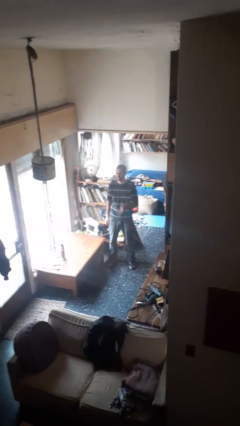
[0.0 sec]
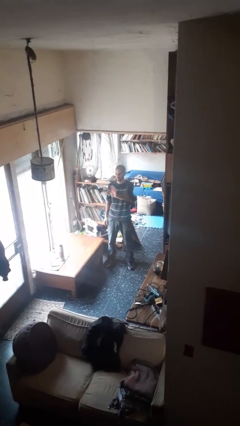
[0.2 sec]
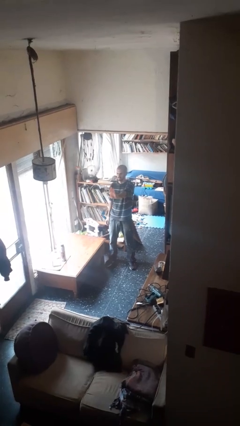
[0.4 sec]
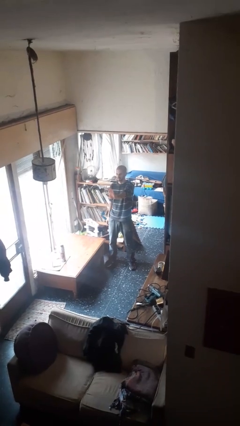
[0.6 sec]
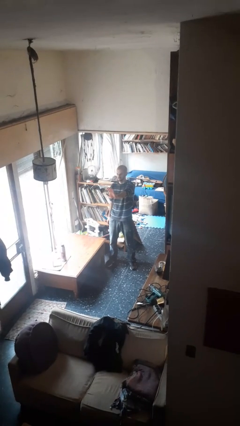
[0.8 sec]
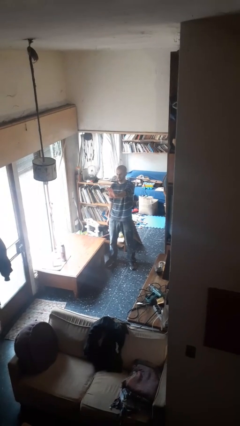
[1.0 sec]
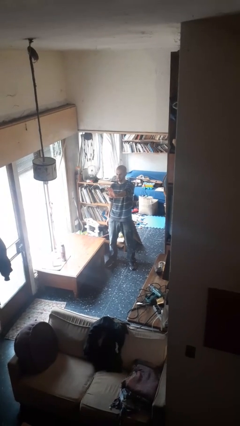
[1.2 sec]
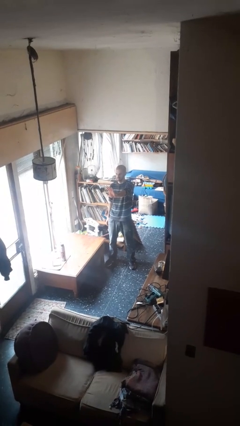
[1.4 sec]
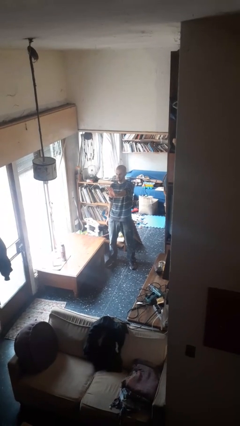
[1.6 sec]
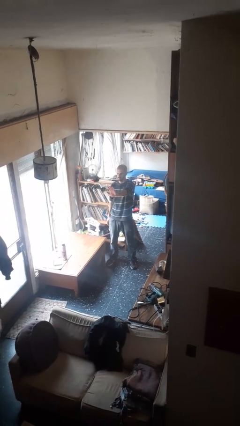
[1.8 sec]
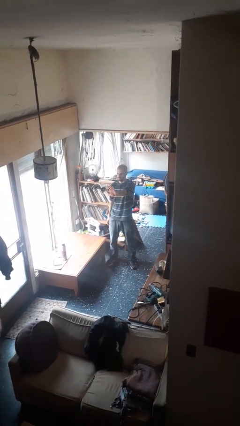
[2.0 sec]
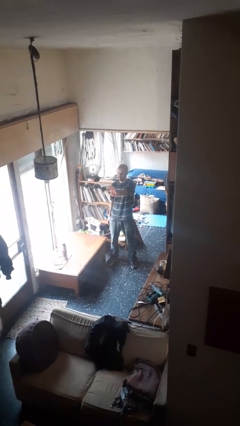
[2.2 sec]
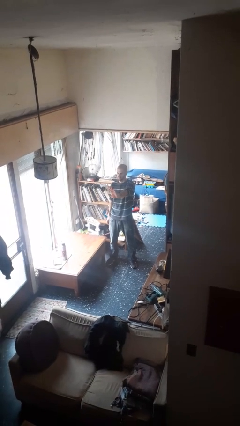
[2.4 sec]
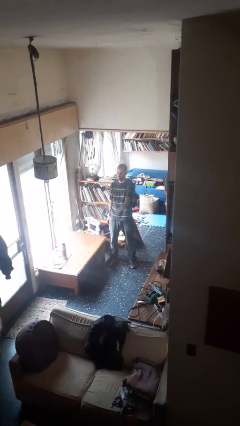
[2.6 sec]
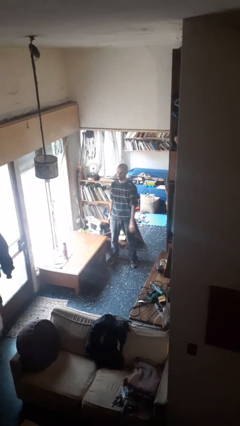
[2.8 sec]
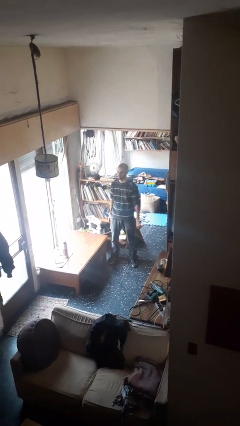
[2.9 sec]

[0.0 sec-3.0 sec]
person gestures stop

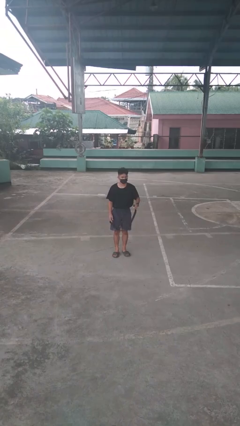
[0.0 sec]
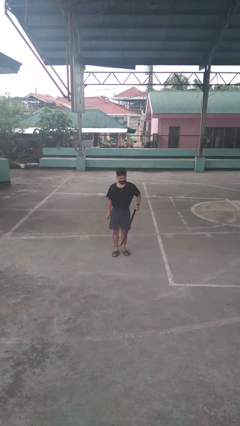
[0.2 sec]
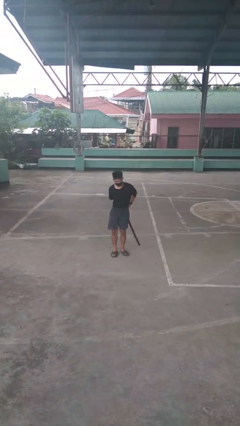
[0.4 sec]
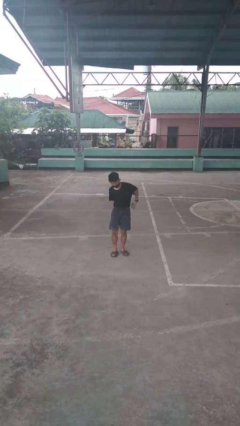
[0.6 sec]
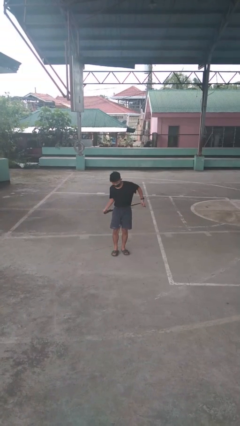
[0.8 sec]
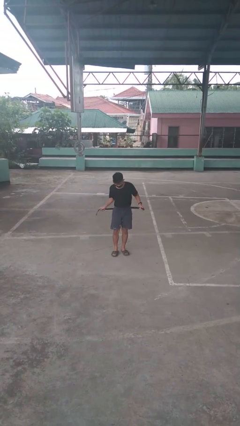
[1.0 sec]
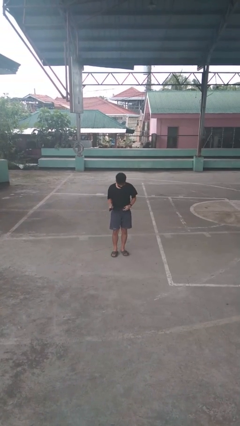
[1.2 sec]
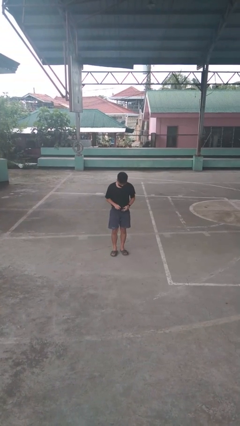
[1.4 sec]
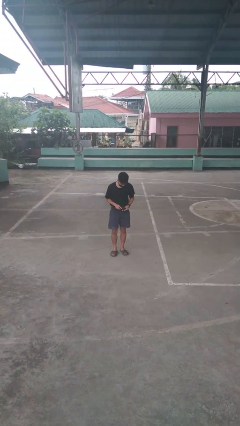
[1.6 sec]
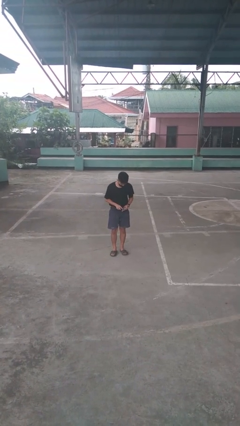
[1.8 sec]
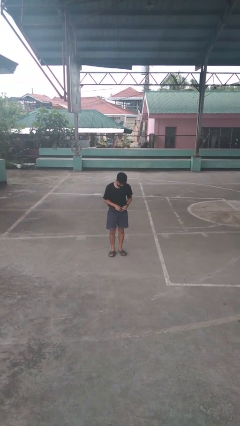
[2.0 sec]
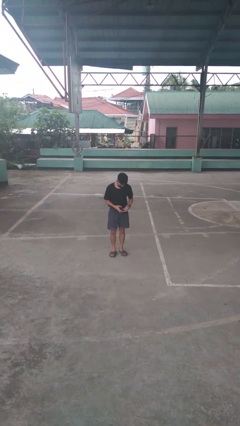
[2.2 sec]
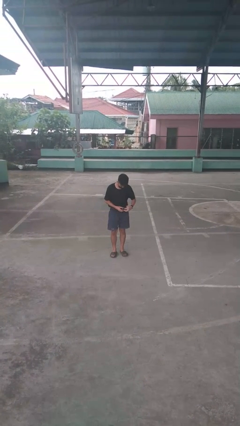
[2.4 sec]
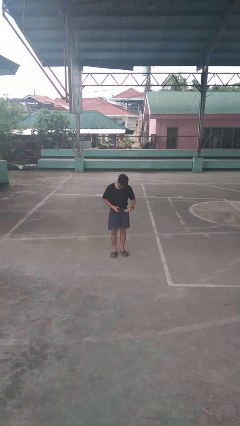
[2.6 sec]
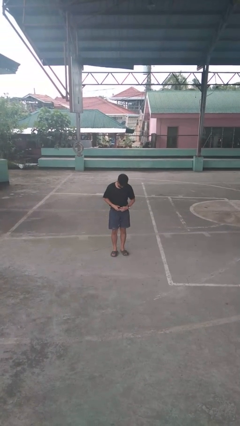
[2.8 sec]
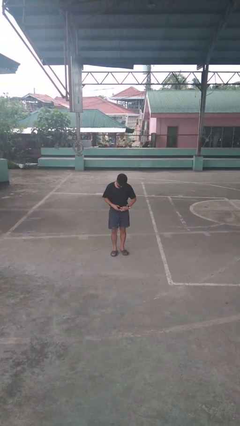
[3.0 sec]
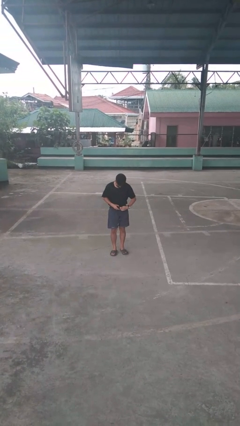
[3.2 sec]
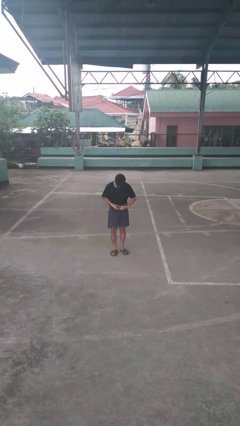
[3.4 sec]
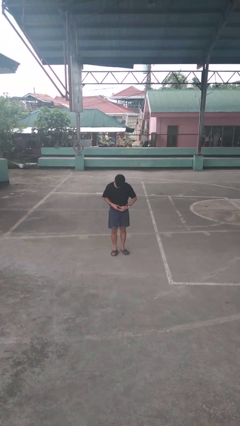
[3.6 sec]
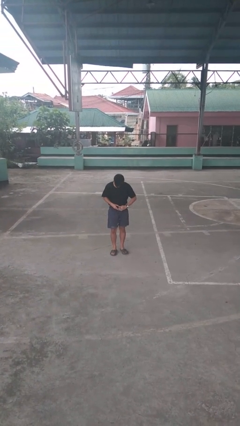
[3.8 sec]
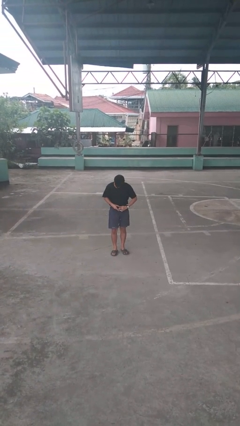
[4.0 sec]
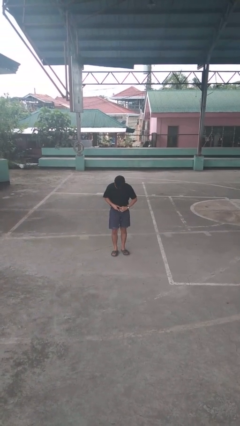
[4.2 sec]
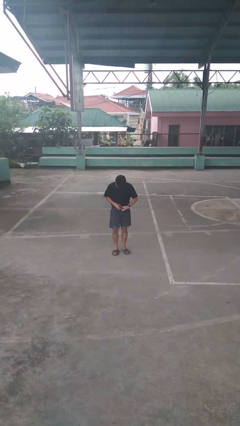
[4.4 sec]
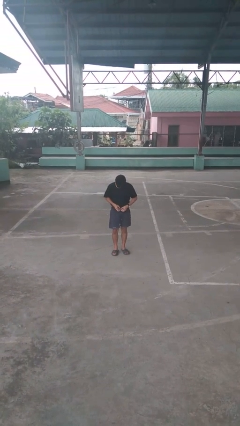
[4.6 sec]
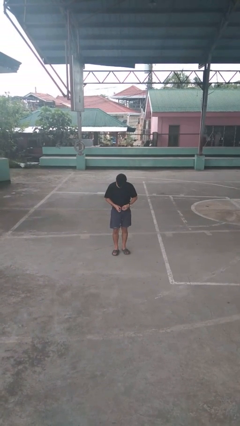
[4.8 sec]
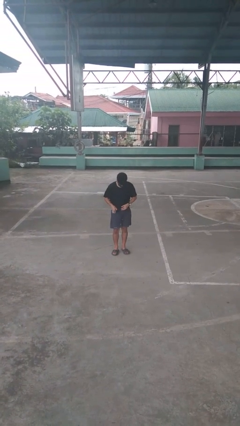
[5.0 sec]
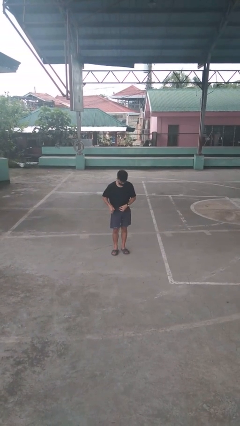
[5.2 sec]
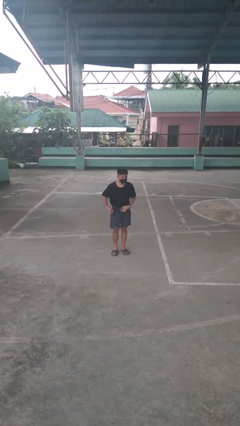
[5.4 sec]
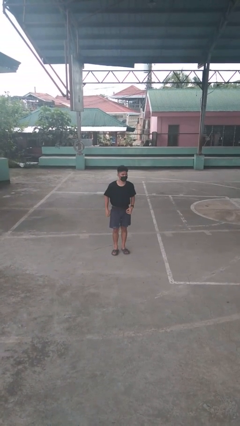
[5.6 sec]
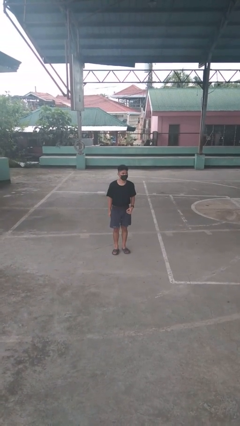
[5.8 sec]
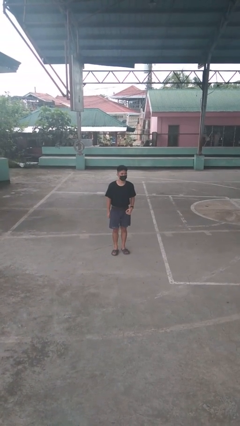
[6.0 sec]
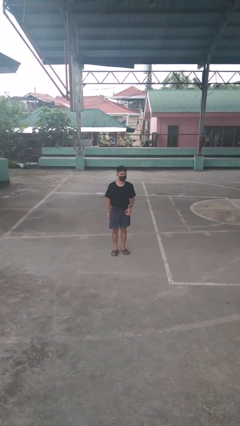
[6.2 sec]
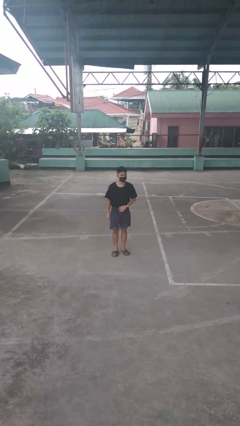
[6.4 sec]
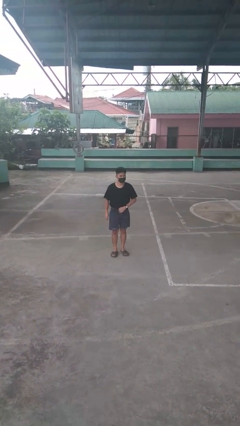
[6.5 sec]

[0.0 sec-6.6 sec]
person puts on belt

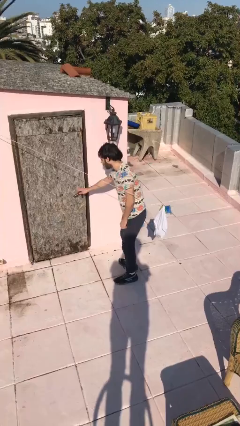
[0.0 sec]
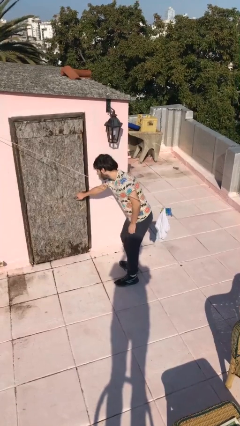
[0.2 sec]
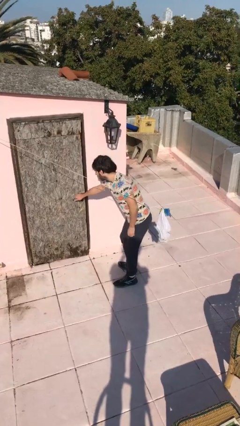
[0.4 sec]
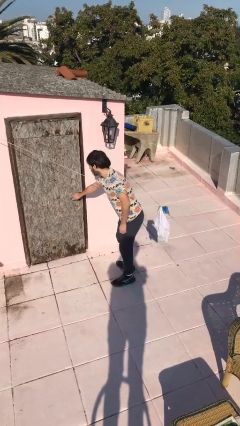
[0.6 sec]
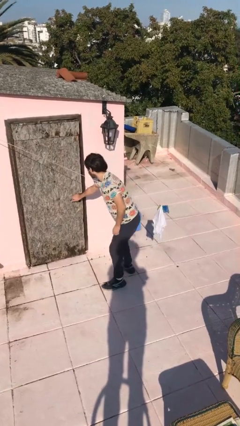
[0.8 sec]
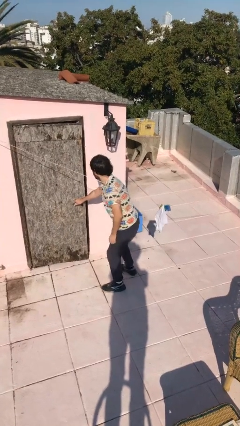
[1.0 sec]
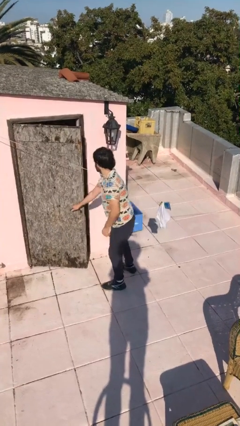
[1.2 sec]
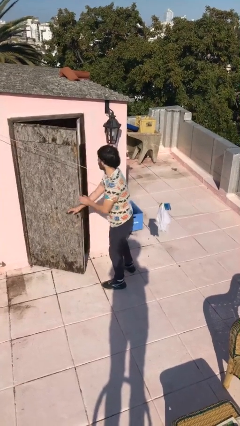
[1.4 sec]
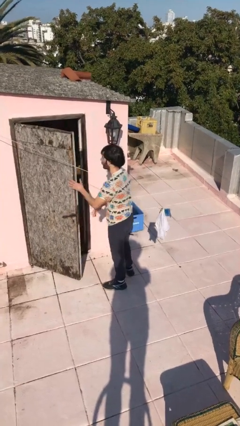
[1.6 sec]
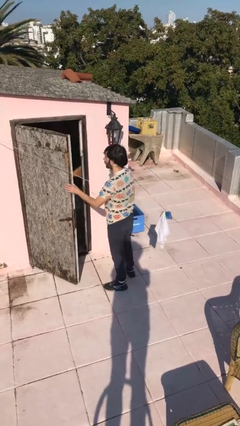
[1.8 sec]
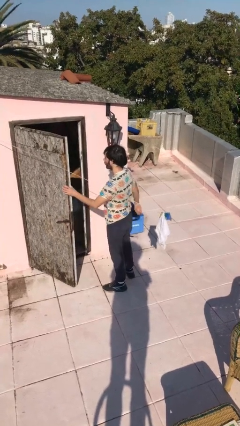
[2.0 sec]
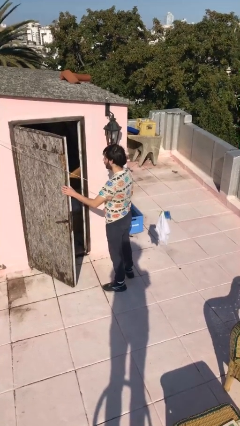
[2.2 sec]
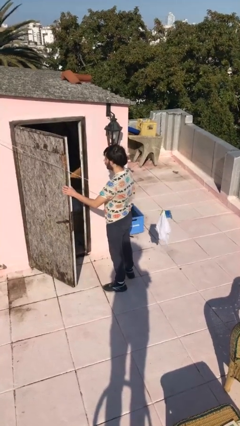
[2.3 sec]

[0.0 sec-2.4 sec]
person opens facility door

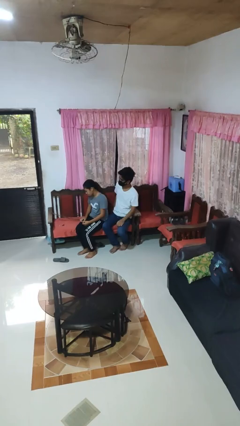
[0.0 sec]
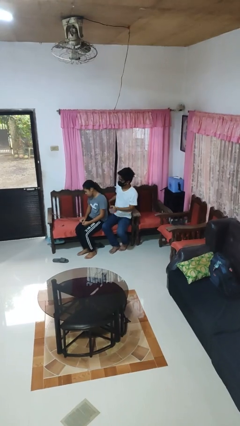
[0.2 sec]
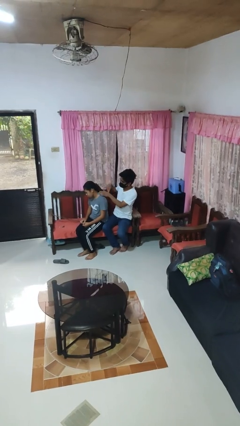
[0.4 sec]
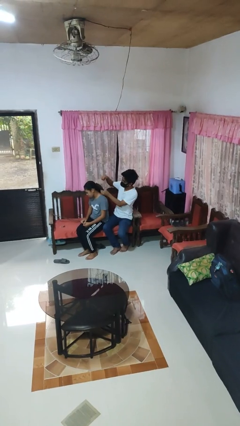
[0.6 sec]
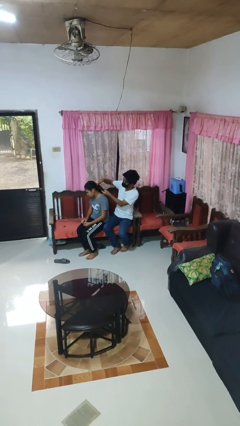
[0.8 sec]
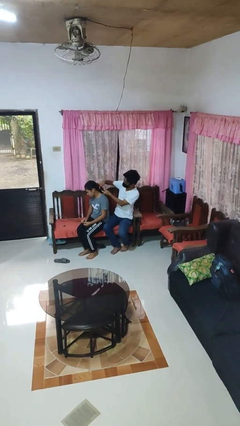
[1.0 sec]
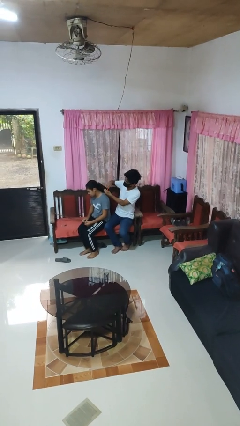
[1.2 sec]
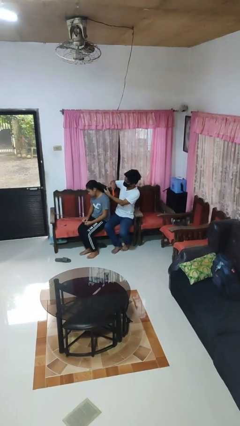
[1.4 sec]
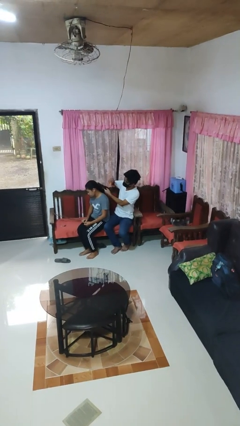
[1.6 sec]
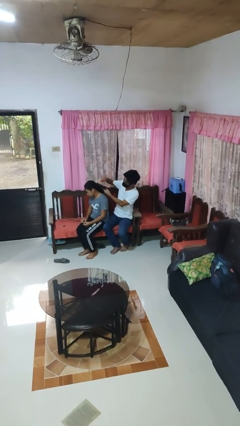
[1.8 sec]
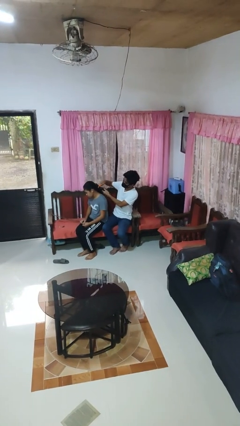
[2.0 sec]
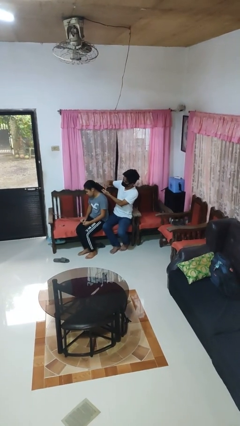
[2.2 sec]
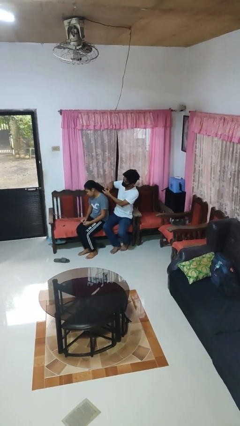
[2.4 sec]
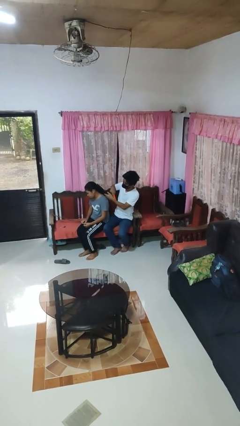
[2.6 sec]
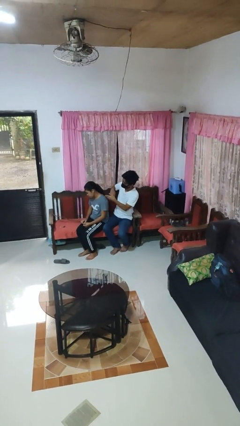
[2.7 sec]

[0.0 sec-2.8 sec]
person brushes hair of person

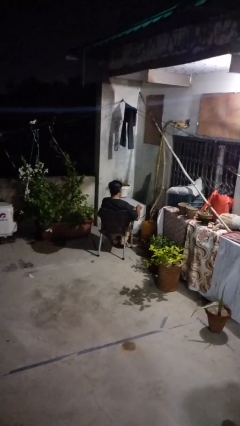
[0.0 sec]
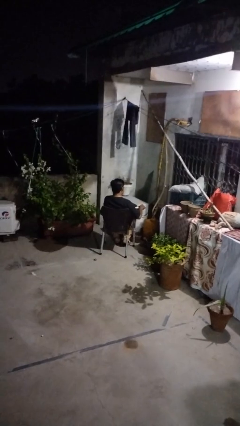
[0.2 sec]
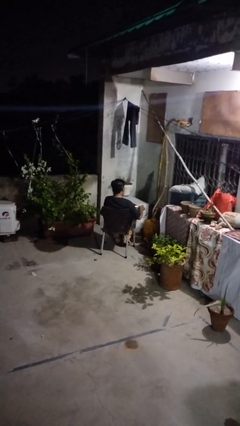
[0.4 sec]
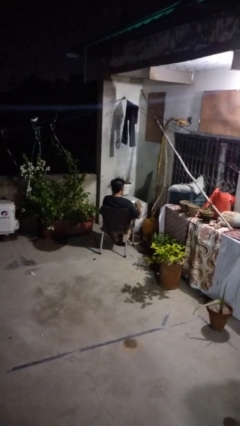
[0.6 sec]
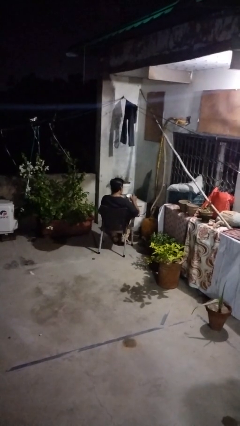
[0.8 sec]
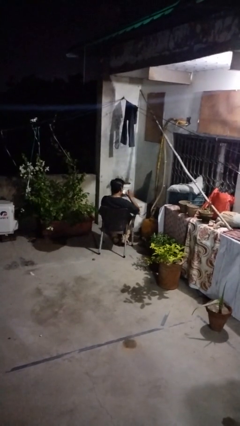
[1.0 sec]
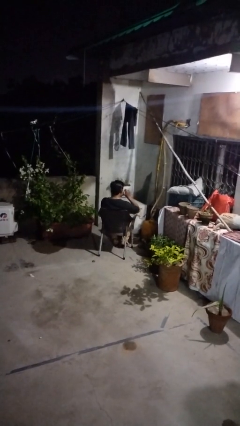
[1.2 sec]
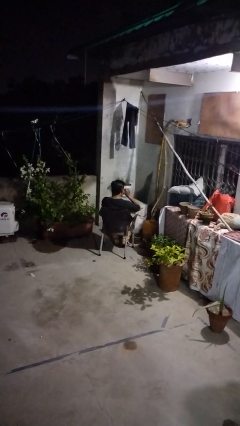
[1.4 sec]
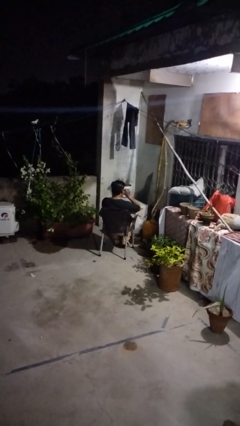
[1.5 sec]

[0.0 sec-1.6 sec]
person drinks from mug

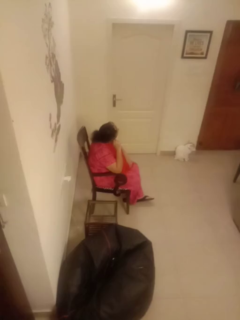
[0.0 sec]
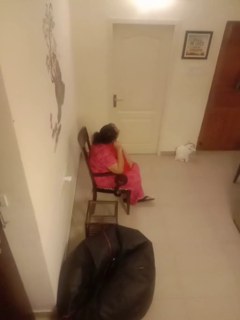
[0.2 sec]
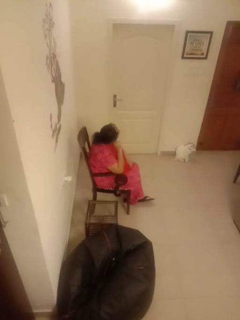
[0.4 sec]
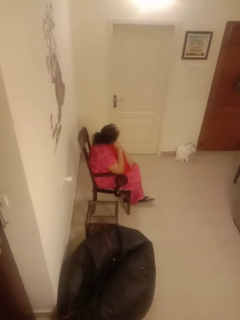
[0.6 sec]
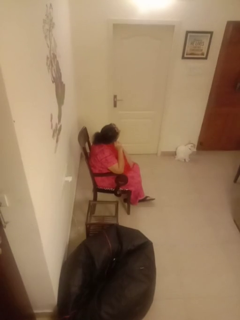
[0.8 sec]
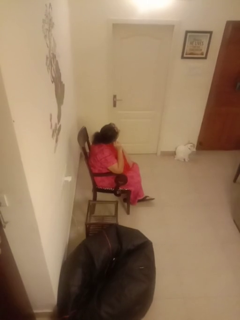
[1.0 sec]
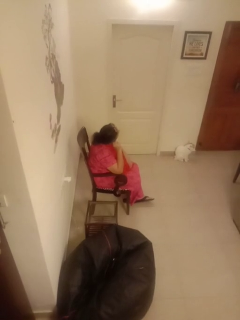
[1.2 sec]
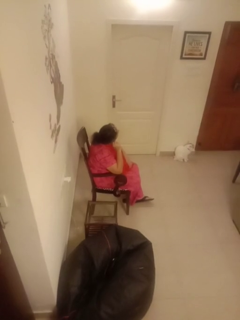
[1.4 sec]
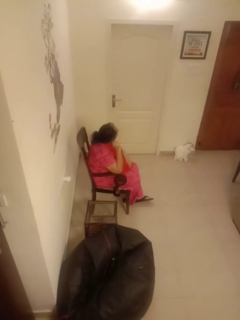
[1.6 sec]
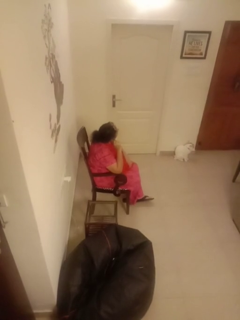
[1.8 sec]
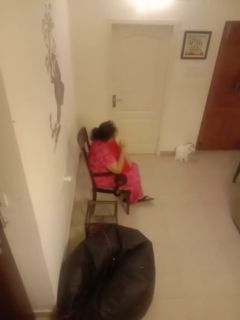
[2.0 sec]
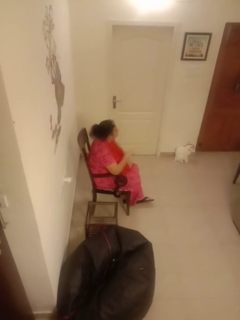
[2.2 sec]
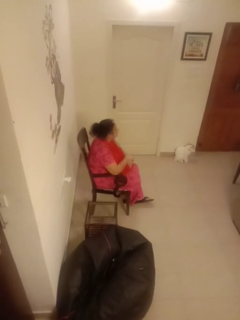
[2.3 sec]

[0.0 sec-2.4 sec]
person touches earlobe
